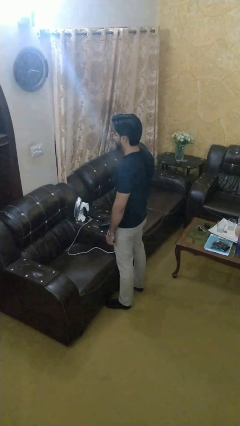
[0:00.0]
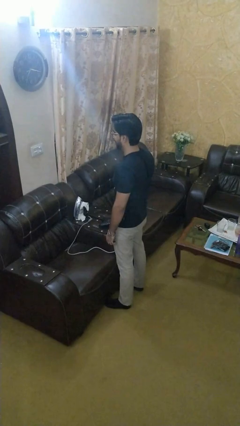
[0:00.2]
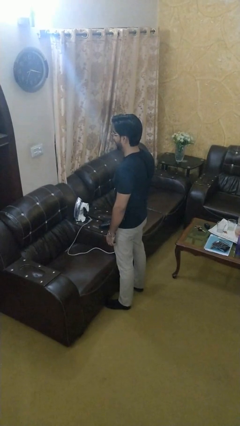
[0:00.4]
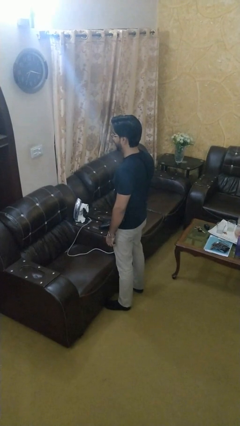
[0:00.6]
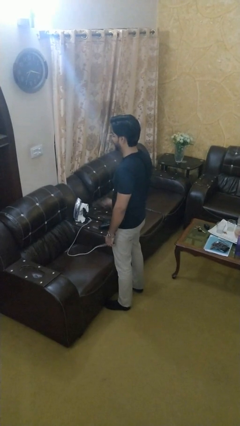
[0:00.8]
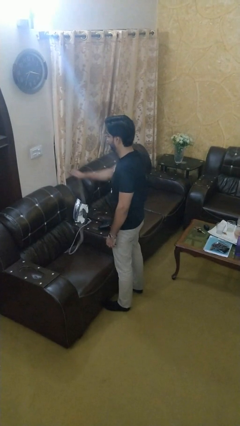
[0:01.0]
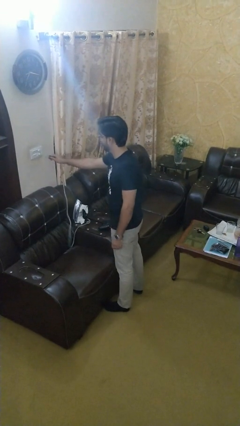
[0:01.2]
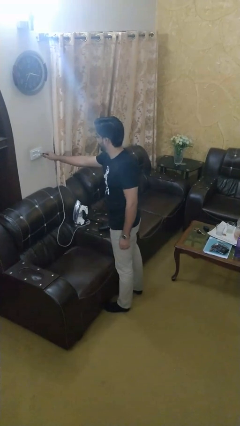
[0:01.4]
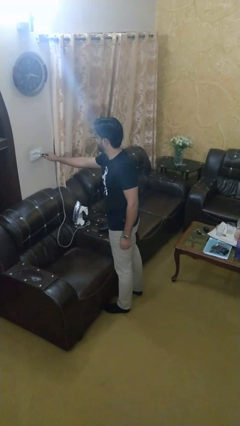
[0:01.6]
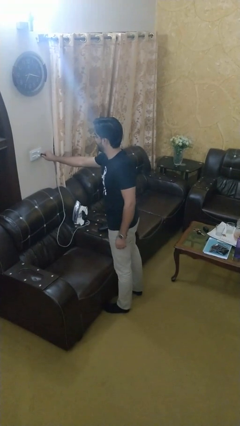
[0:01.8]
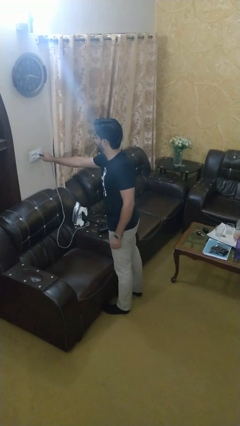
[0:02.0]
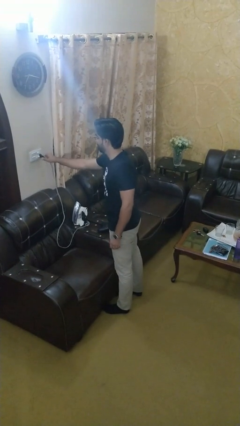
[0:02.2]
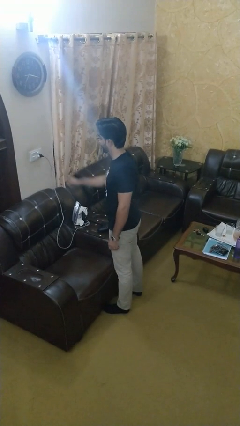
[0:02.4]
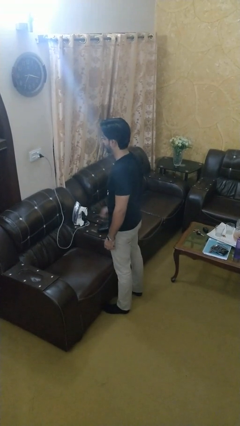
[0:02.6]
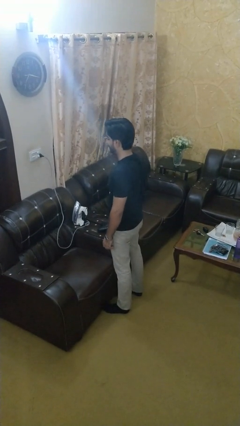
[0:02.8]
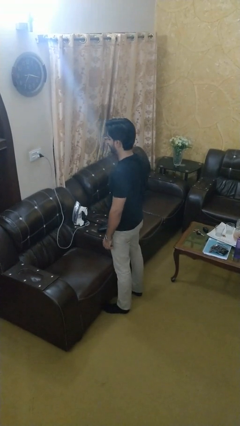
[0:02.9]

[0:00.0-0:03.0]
person plugs into electrical socket

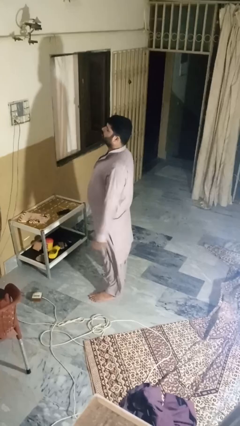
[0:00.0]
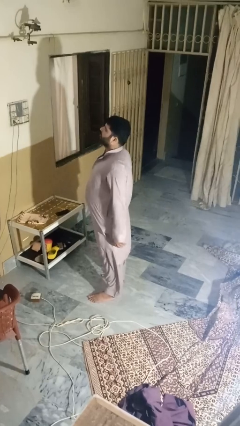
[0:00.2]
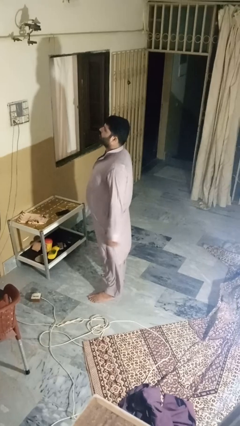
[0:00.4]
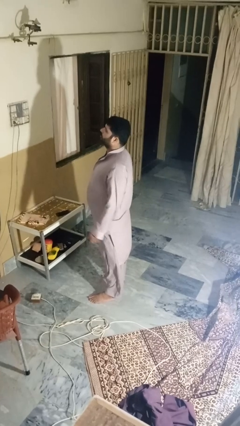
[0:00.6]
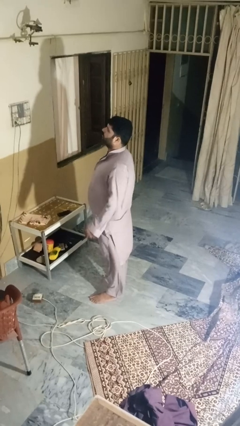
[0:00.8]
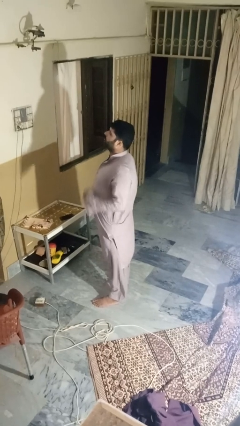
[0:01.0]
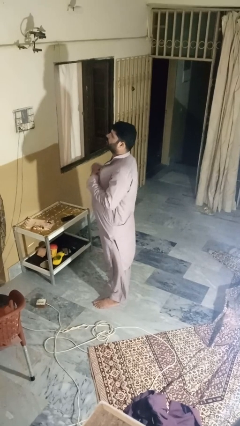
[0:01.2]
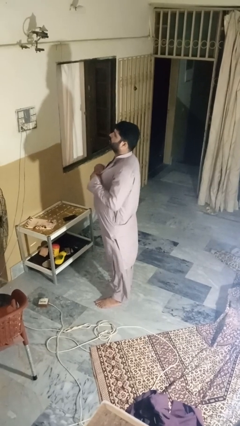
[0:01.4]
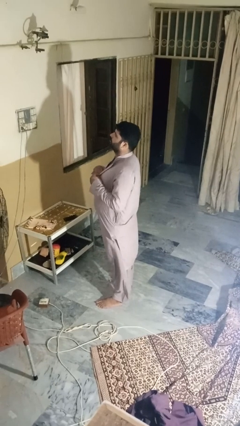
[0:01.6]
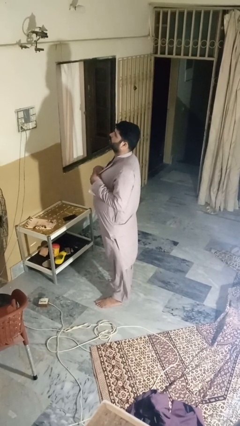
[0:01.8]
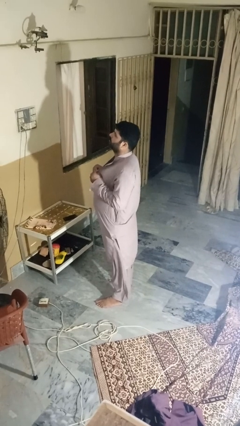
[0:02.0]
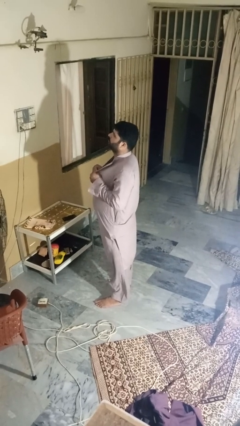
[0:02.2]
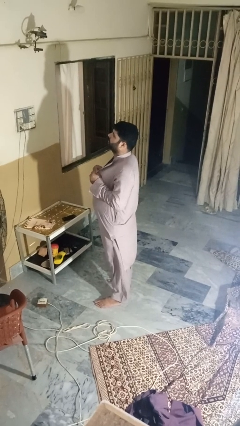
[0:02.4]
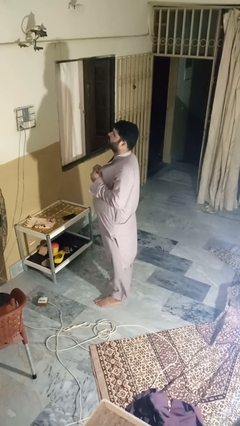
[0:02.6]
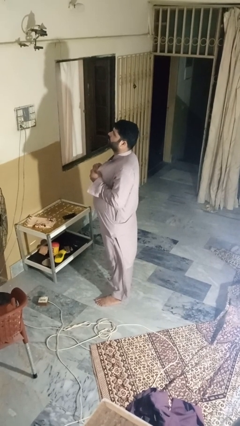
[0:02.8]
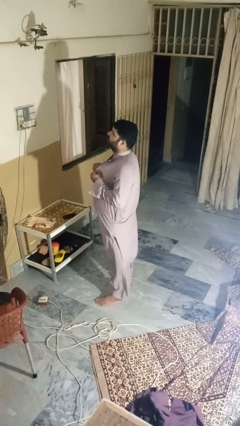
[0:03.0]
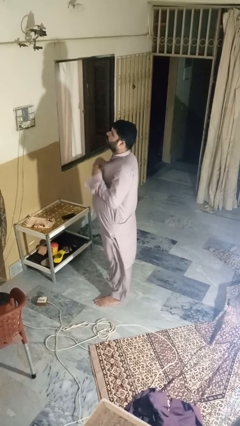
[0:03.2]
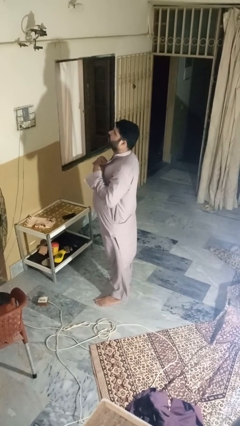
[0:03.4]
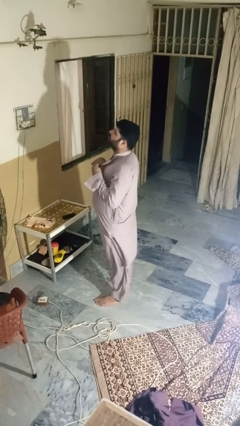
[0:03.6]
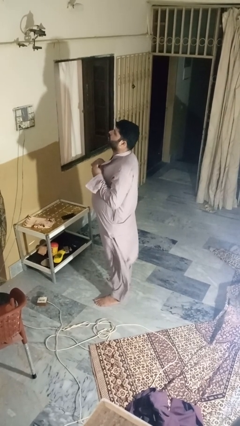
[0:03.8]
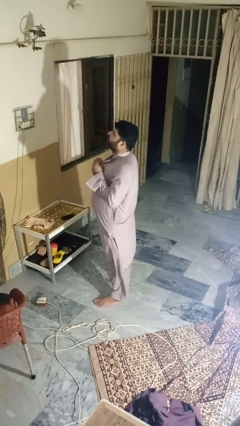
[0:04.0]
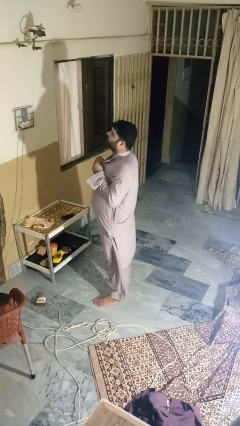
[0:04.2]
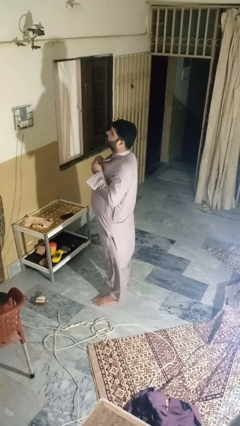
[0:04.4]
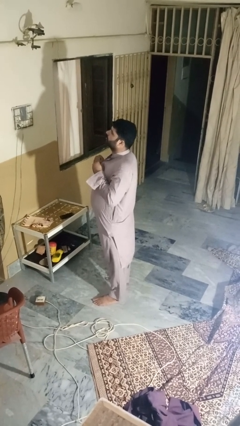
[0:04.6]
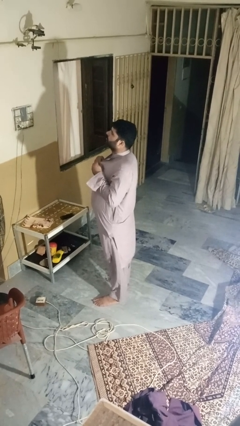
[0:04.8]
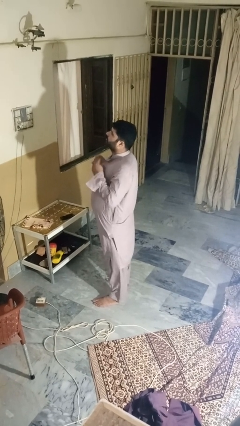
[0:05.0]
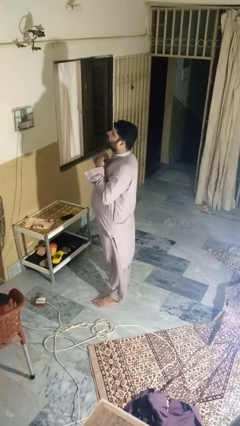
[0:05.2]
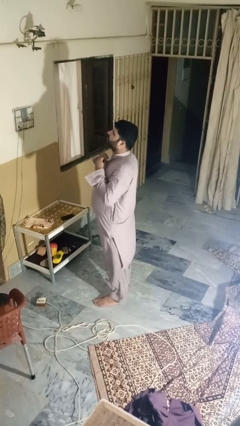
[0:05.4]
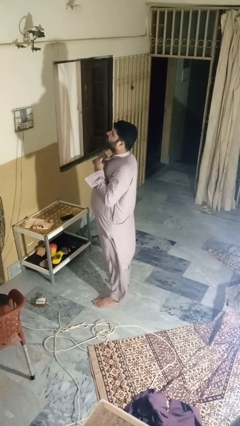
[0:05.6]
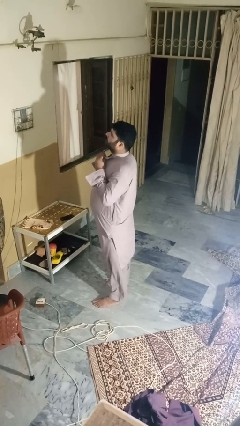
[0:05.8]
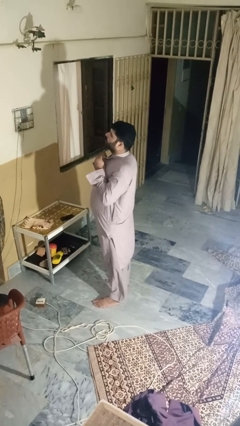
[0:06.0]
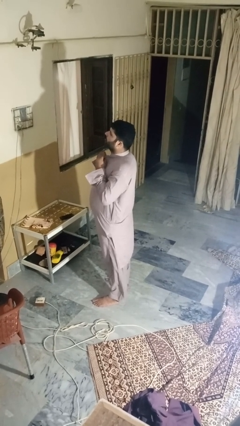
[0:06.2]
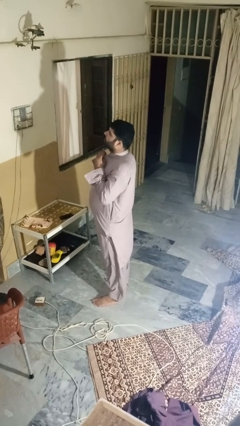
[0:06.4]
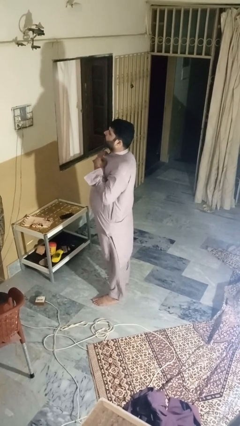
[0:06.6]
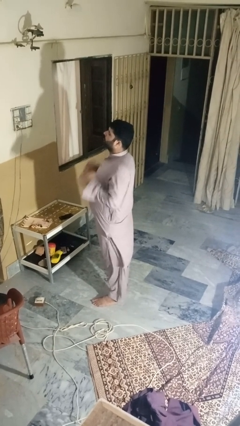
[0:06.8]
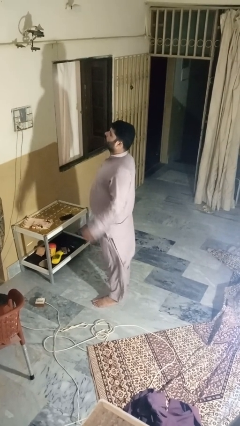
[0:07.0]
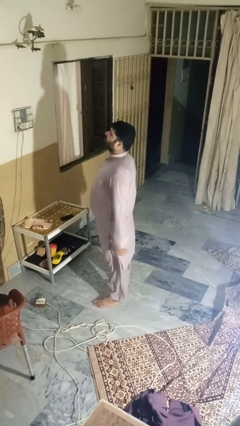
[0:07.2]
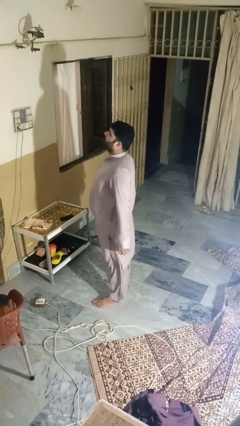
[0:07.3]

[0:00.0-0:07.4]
person buttons shirt

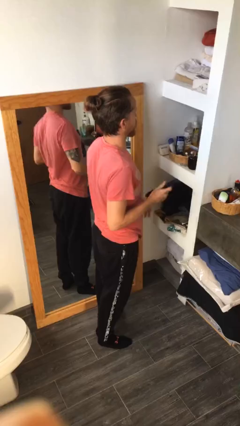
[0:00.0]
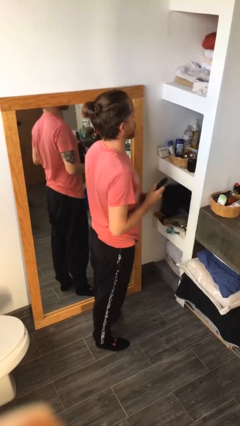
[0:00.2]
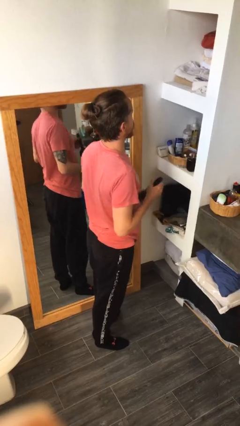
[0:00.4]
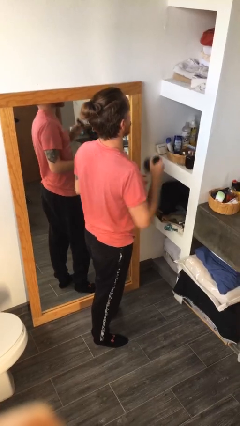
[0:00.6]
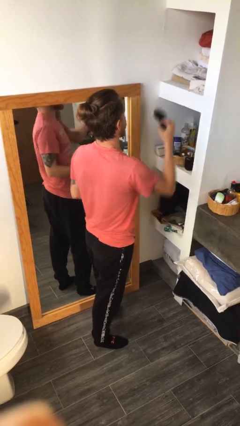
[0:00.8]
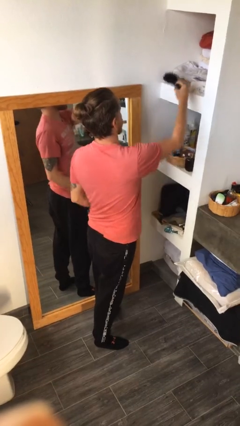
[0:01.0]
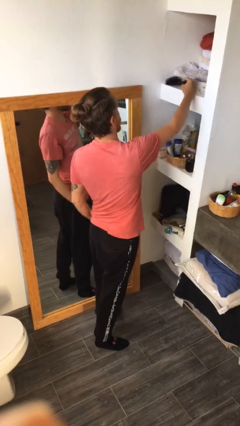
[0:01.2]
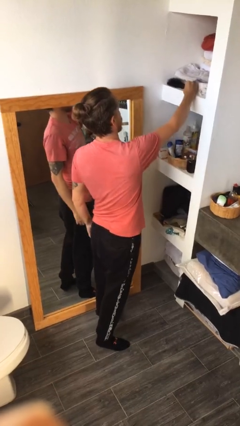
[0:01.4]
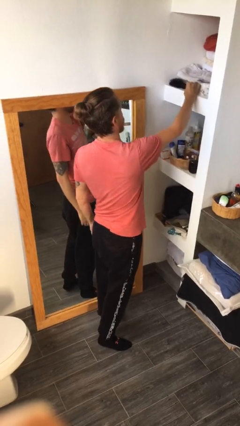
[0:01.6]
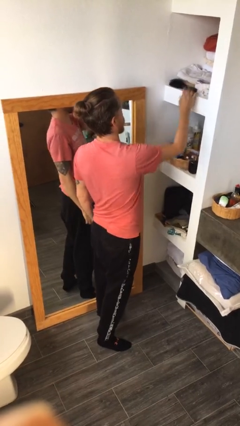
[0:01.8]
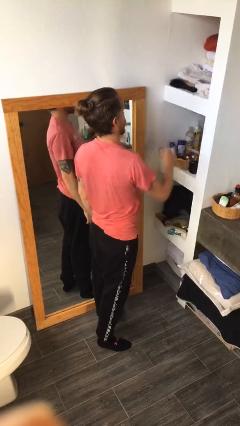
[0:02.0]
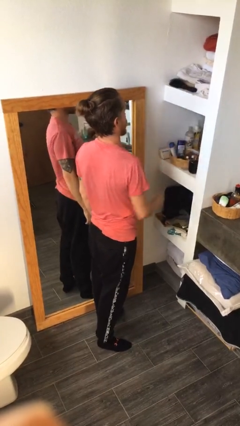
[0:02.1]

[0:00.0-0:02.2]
person puts down object on countertop

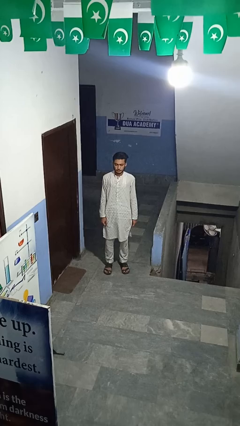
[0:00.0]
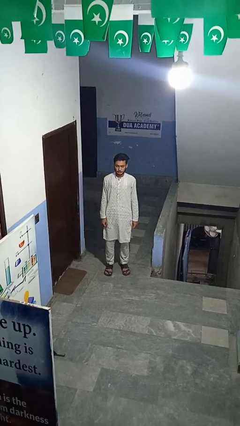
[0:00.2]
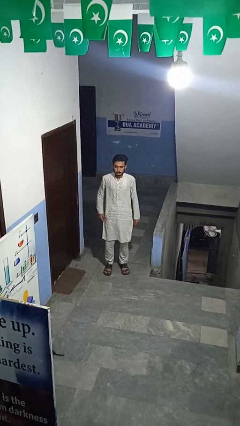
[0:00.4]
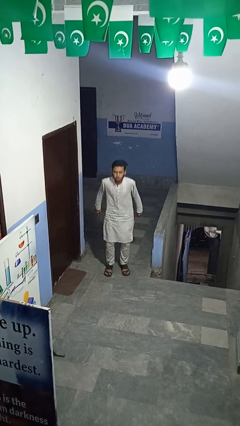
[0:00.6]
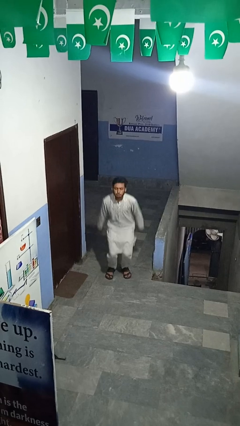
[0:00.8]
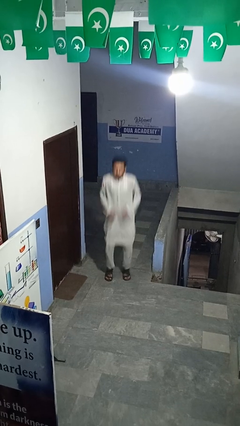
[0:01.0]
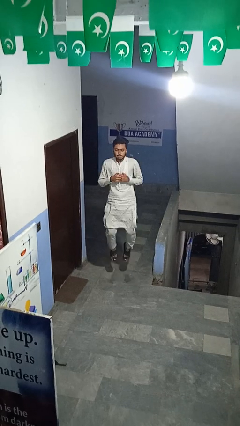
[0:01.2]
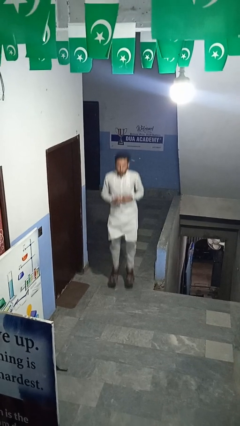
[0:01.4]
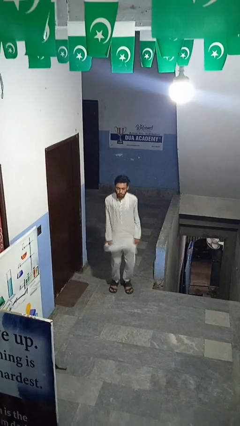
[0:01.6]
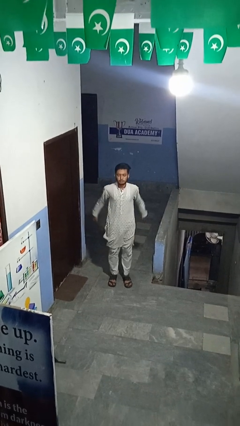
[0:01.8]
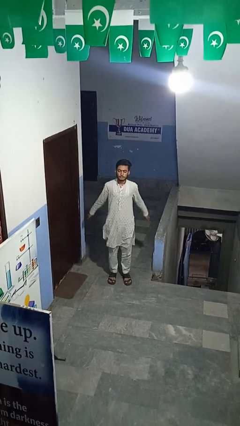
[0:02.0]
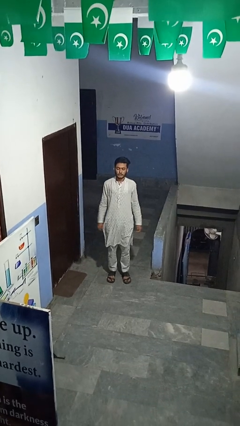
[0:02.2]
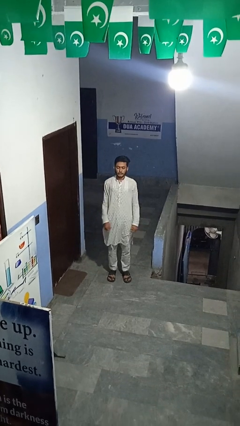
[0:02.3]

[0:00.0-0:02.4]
person jumps

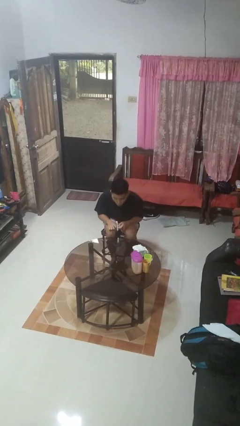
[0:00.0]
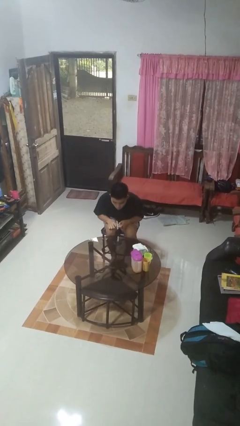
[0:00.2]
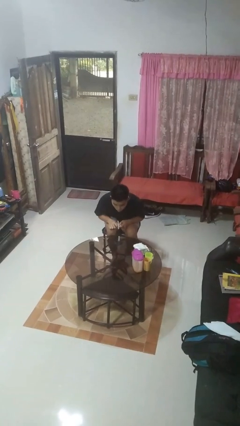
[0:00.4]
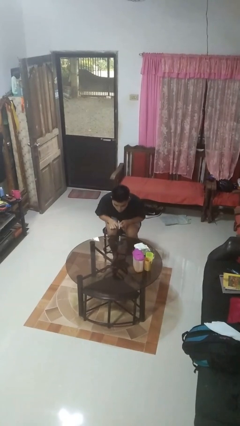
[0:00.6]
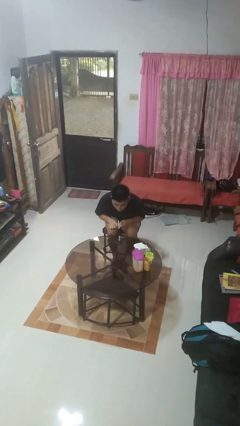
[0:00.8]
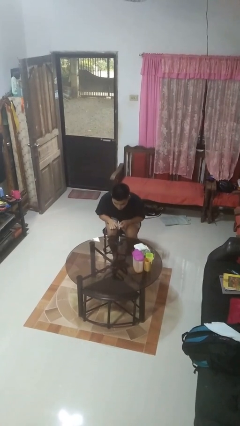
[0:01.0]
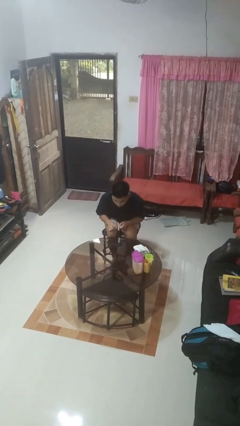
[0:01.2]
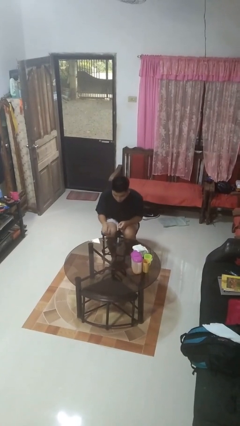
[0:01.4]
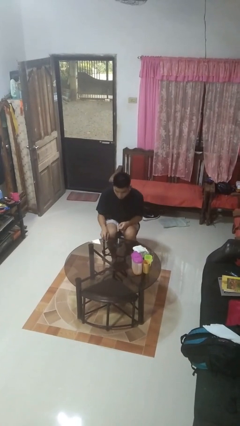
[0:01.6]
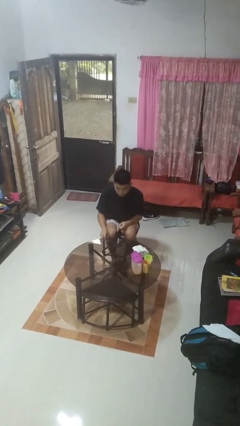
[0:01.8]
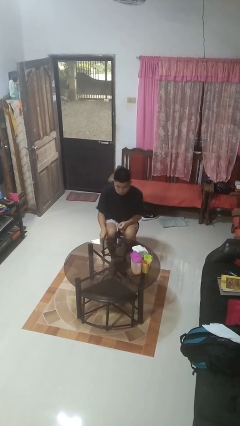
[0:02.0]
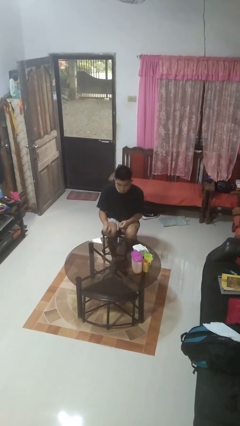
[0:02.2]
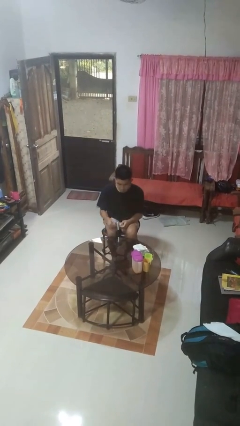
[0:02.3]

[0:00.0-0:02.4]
person extinguishes candle
